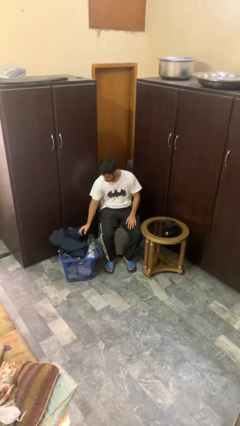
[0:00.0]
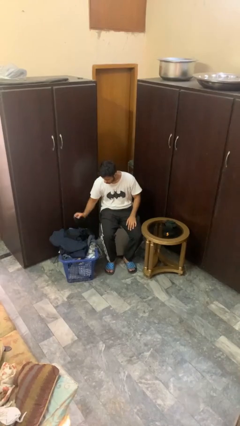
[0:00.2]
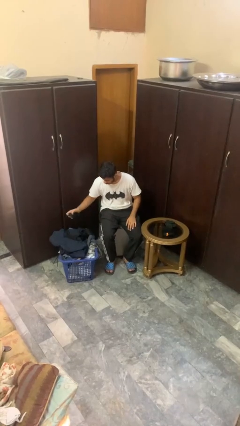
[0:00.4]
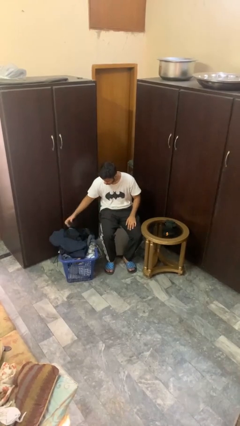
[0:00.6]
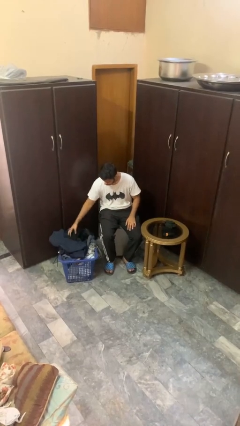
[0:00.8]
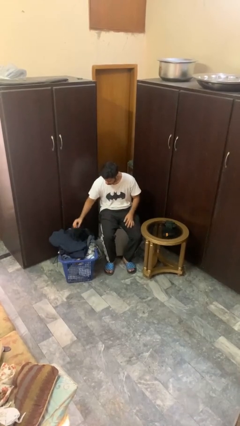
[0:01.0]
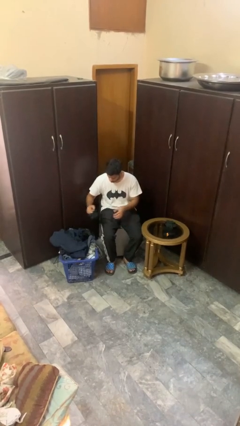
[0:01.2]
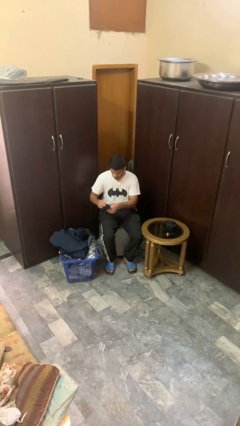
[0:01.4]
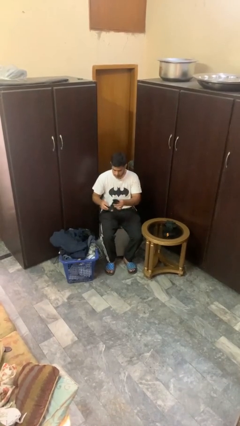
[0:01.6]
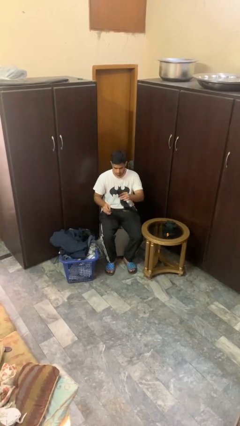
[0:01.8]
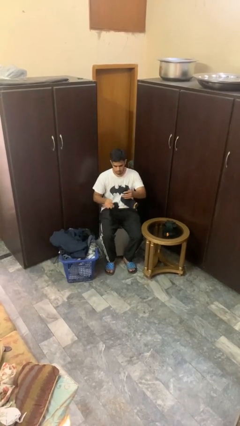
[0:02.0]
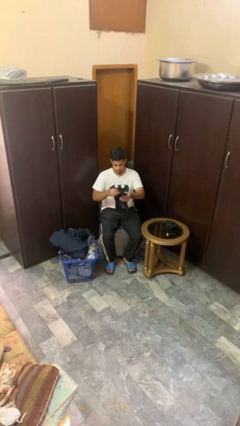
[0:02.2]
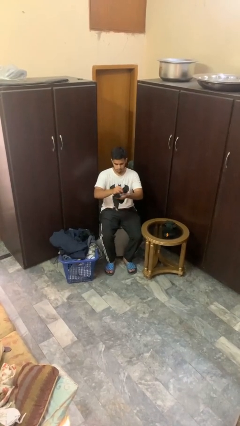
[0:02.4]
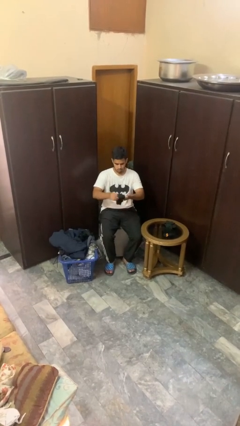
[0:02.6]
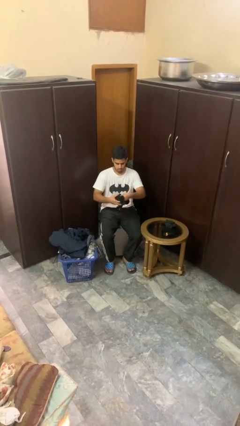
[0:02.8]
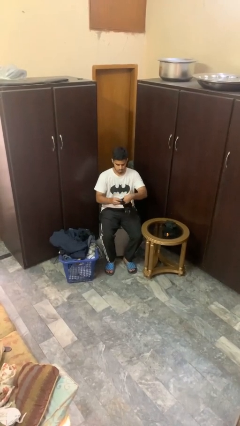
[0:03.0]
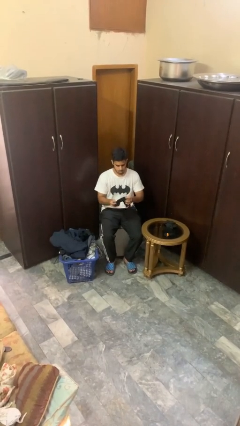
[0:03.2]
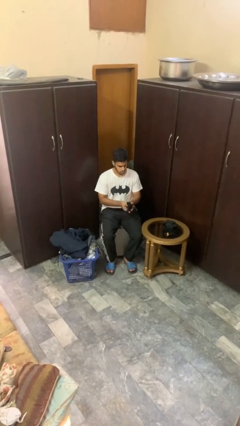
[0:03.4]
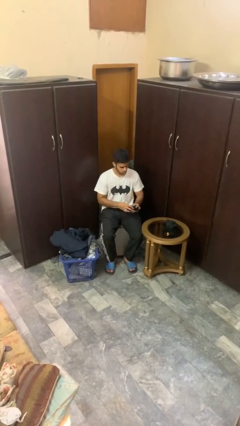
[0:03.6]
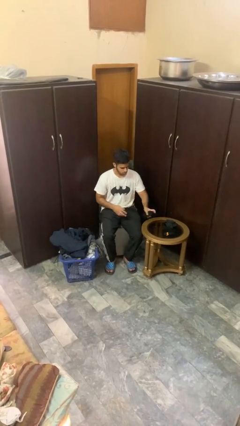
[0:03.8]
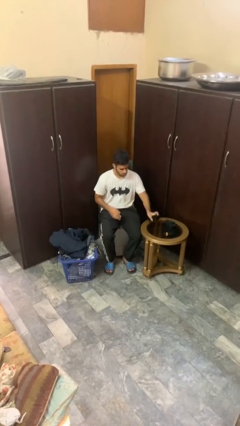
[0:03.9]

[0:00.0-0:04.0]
person folds socks

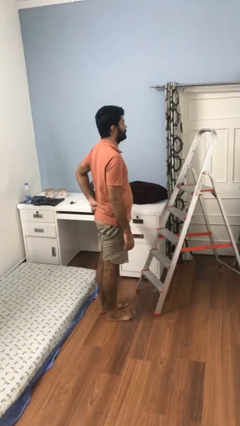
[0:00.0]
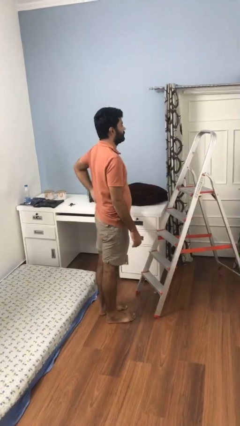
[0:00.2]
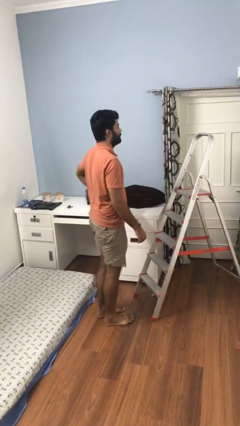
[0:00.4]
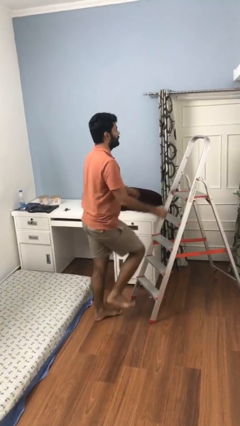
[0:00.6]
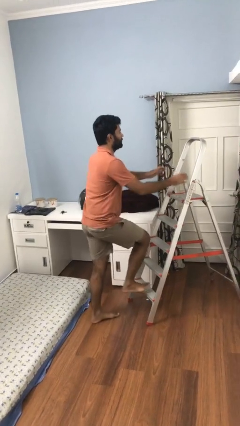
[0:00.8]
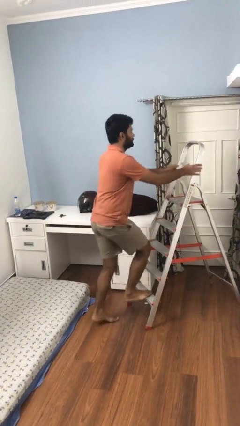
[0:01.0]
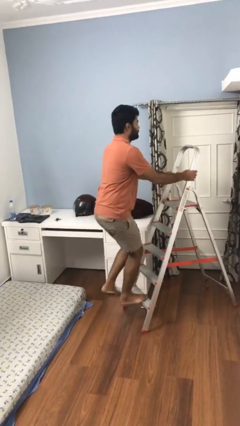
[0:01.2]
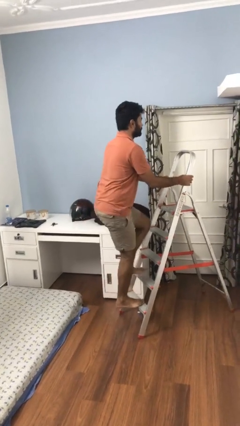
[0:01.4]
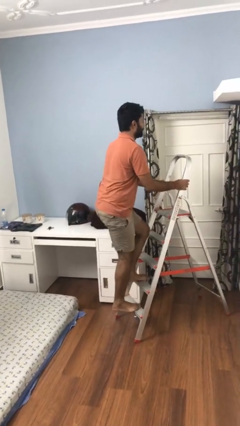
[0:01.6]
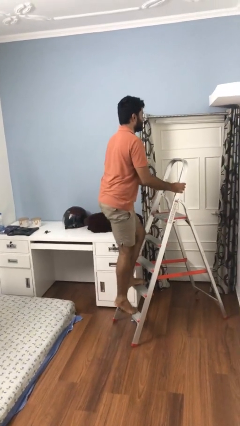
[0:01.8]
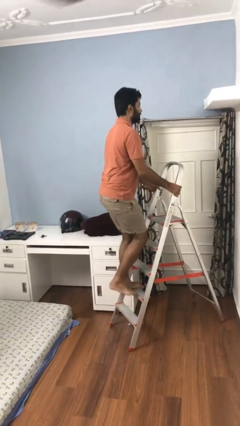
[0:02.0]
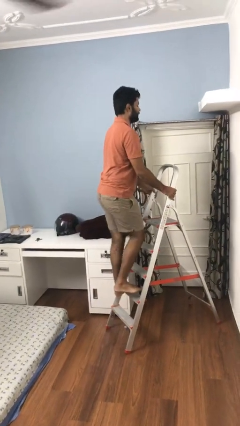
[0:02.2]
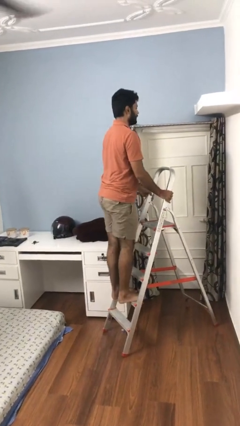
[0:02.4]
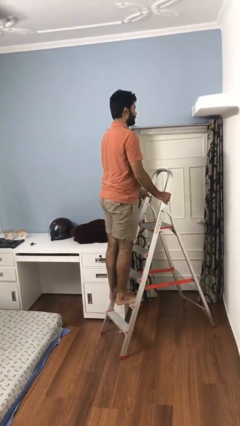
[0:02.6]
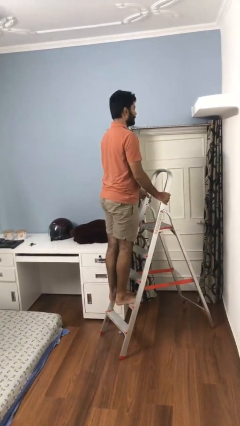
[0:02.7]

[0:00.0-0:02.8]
person climbs up ladder

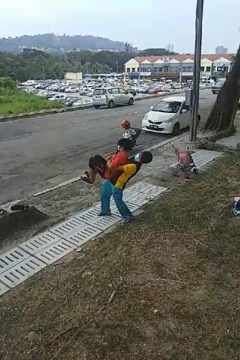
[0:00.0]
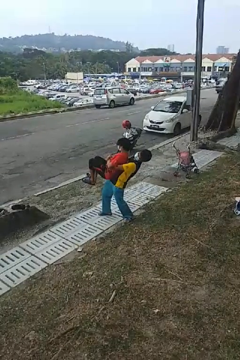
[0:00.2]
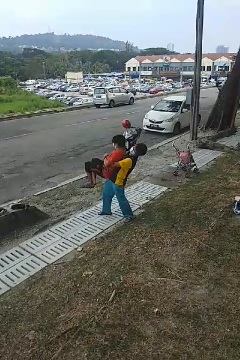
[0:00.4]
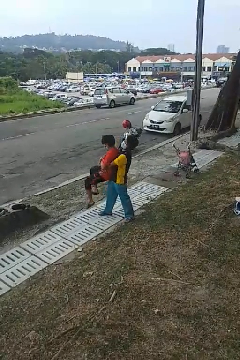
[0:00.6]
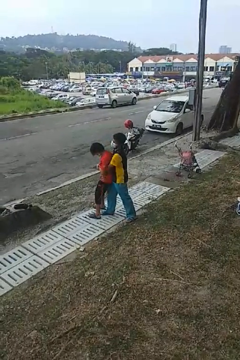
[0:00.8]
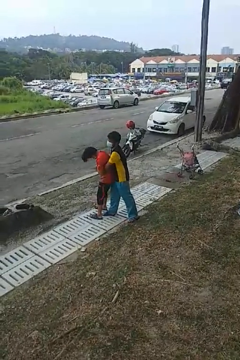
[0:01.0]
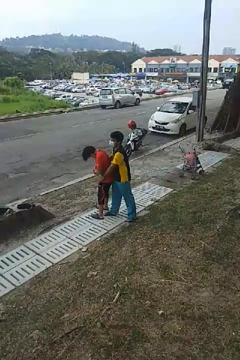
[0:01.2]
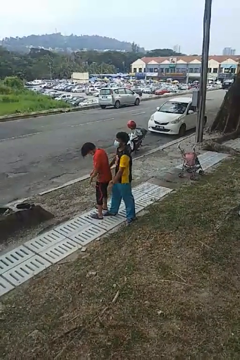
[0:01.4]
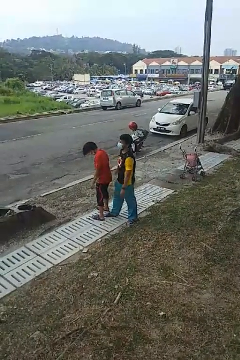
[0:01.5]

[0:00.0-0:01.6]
person puts down person

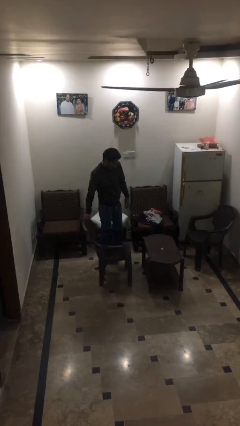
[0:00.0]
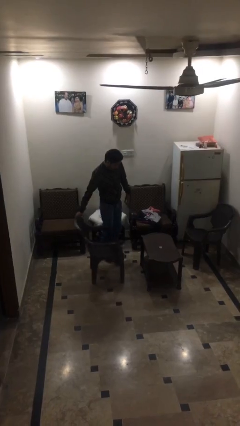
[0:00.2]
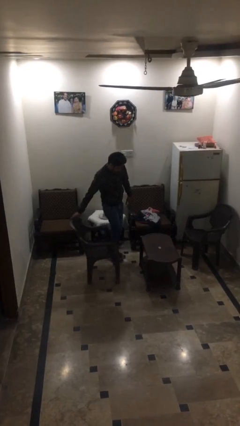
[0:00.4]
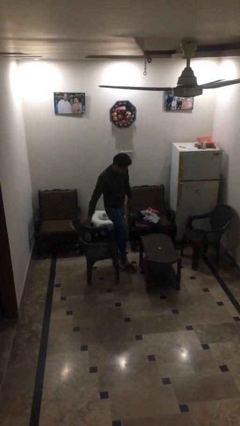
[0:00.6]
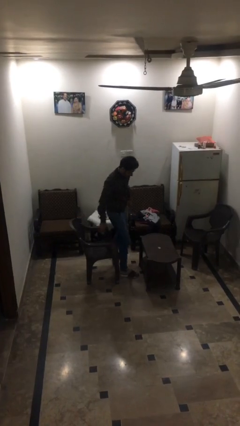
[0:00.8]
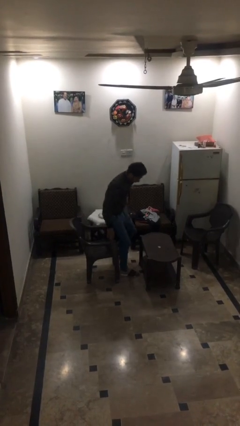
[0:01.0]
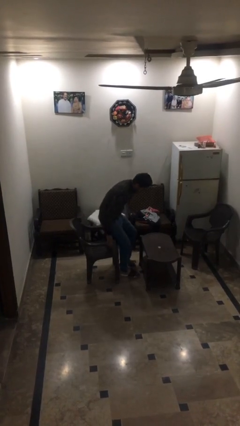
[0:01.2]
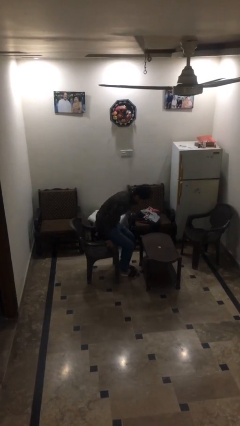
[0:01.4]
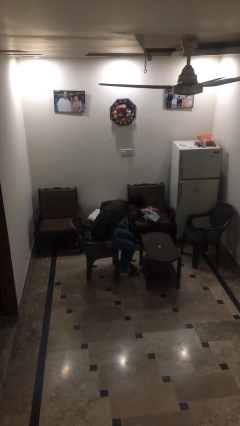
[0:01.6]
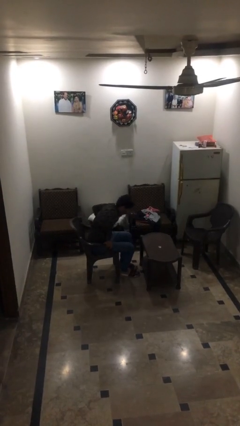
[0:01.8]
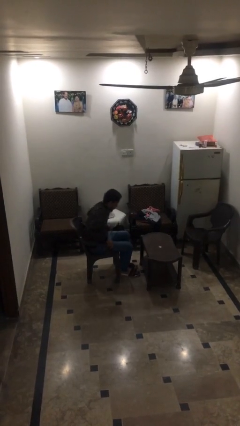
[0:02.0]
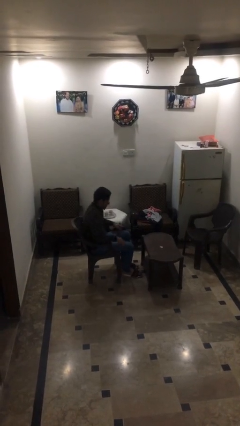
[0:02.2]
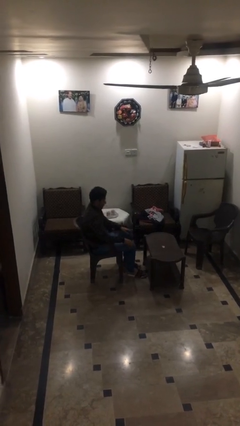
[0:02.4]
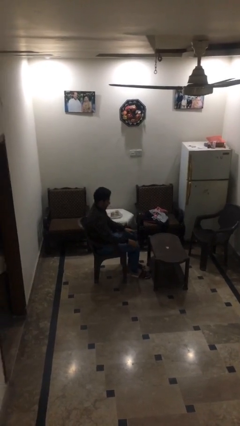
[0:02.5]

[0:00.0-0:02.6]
person sits down

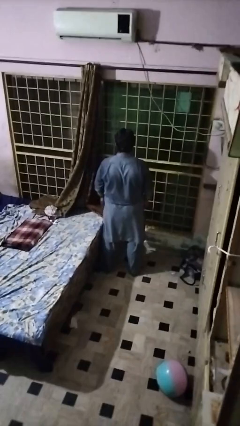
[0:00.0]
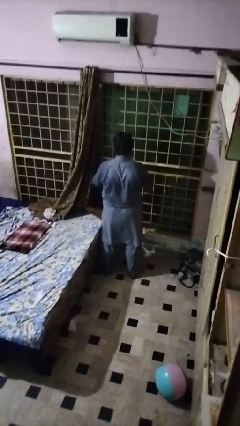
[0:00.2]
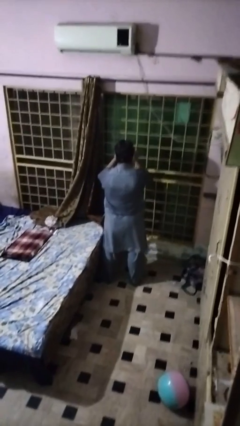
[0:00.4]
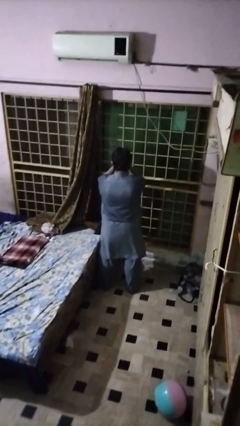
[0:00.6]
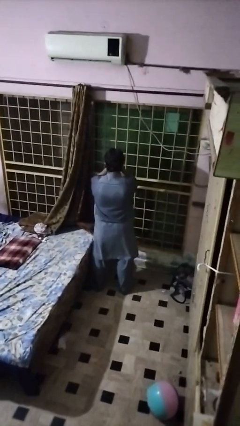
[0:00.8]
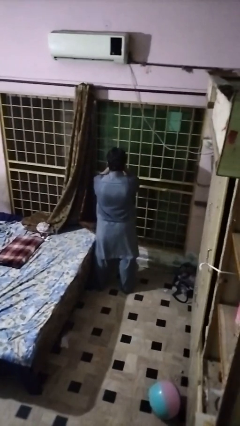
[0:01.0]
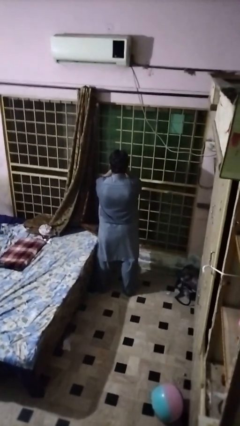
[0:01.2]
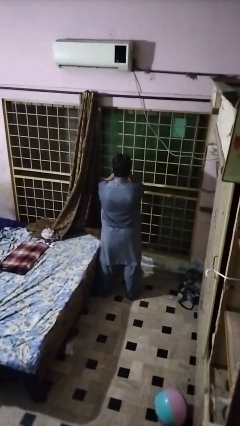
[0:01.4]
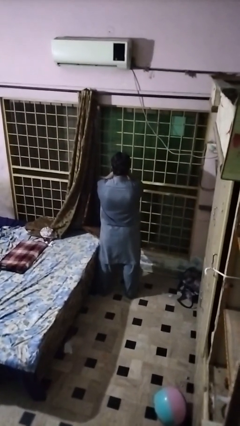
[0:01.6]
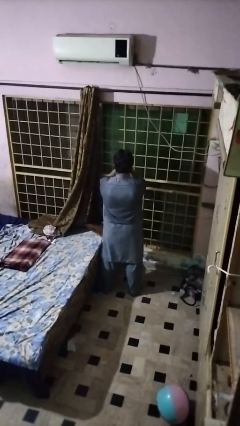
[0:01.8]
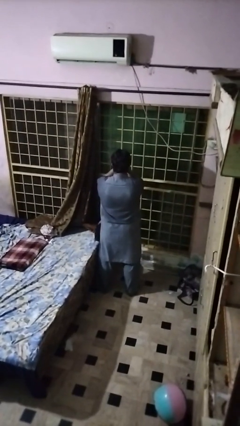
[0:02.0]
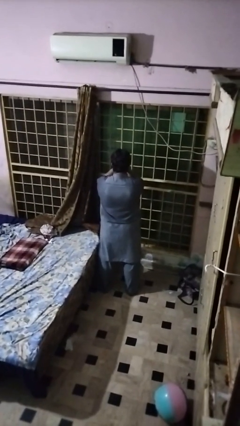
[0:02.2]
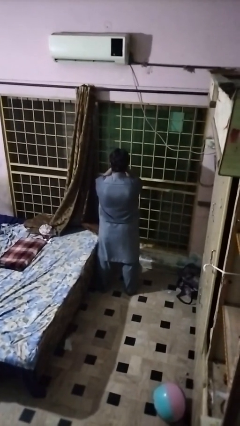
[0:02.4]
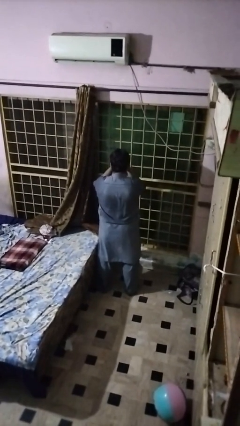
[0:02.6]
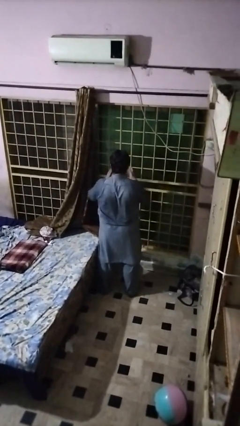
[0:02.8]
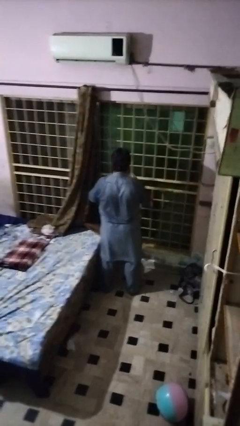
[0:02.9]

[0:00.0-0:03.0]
person covers face with hands

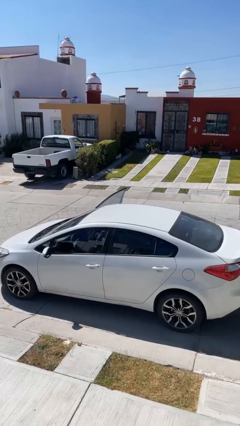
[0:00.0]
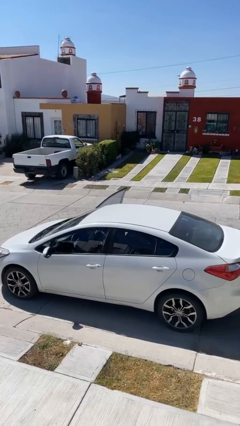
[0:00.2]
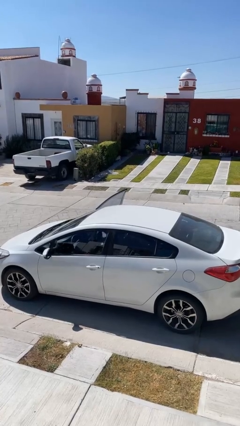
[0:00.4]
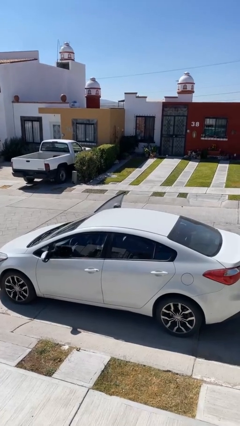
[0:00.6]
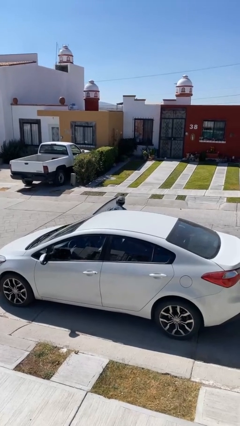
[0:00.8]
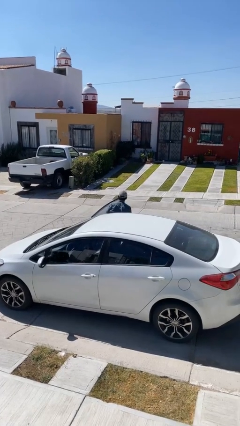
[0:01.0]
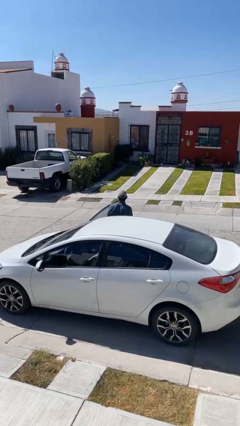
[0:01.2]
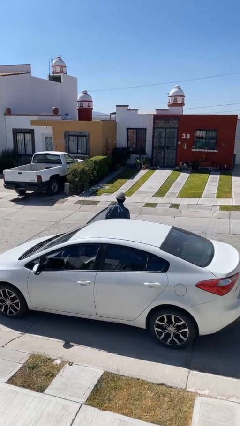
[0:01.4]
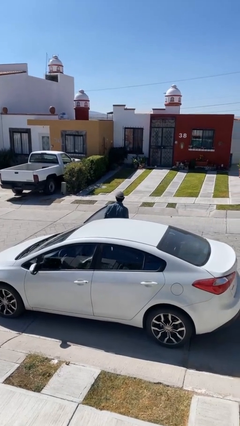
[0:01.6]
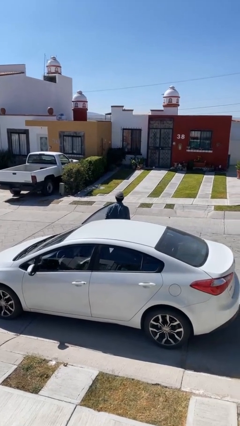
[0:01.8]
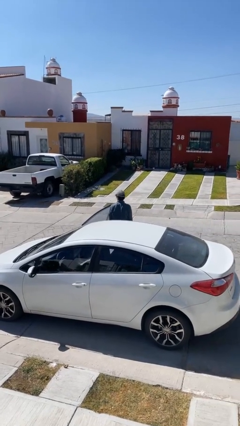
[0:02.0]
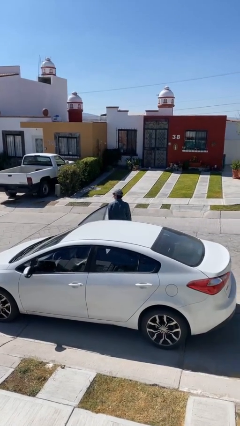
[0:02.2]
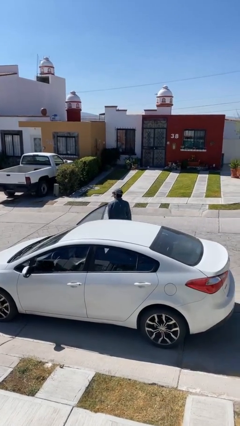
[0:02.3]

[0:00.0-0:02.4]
person exits car

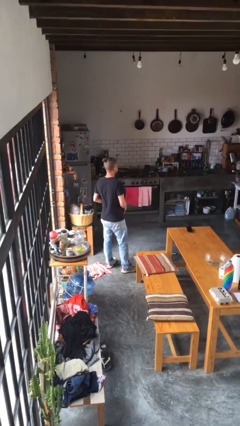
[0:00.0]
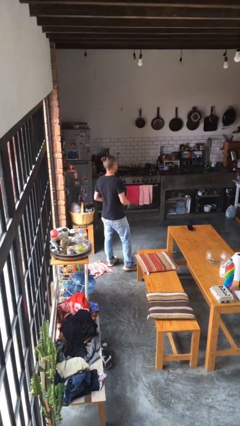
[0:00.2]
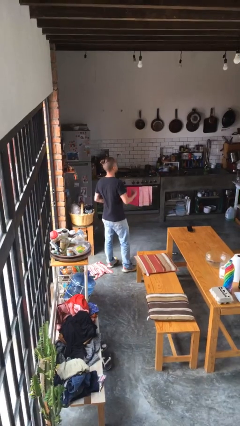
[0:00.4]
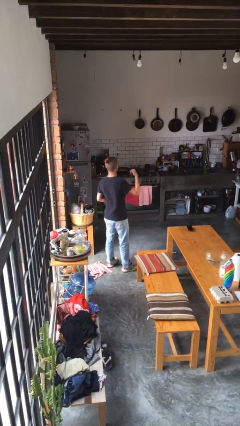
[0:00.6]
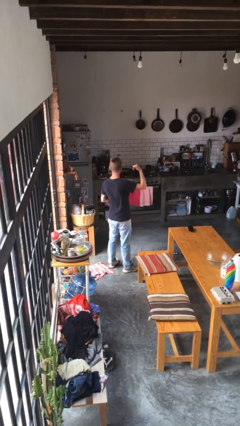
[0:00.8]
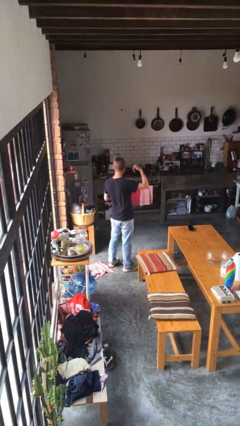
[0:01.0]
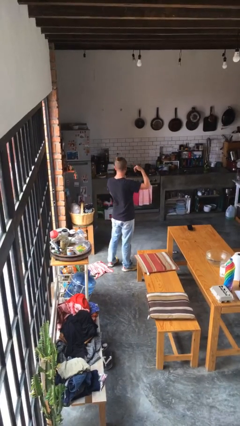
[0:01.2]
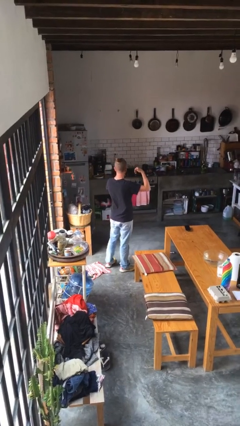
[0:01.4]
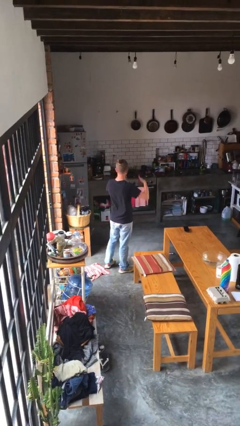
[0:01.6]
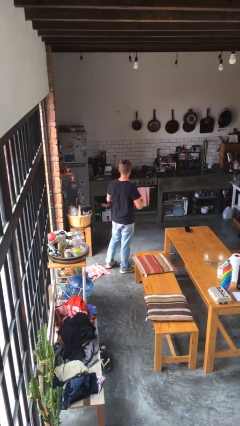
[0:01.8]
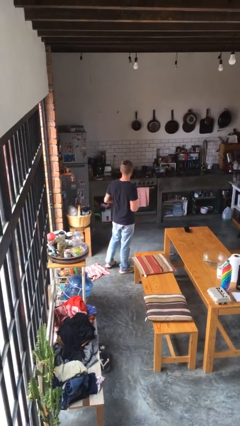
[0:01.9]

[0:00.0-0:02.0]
person gestures call me
